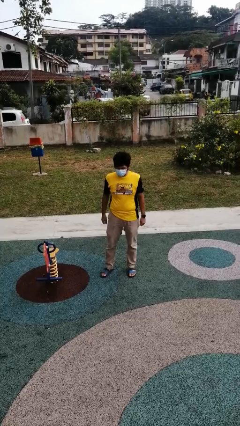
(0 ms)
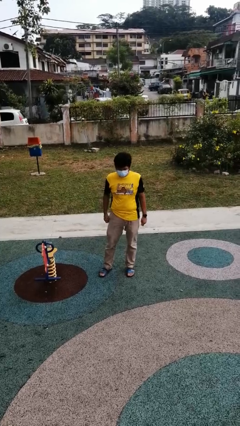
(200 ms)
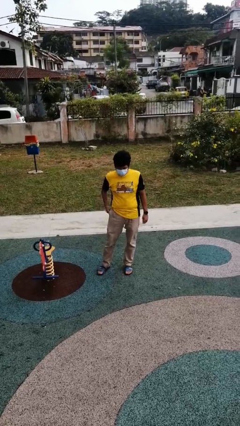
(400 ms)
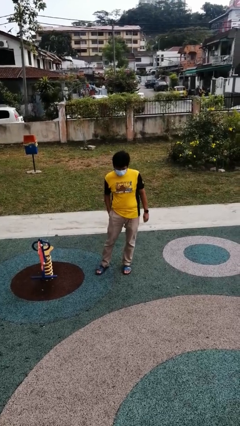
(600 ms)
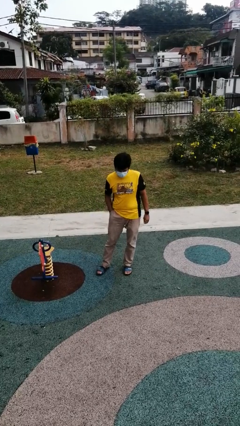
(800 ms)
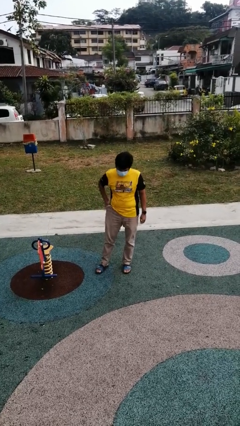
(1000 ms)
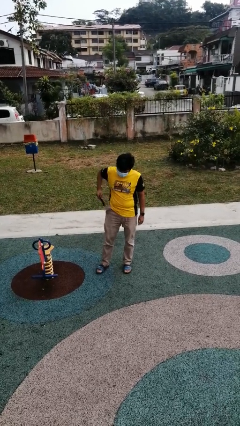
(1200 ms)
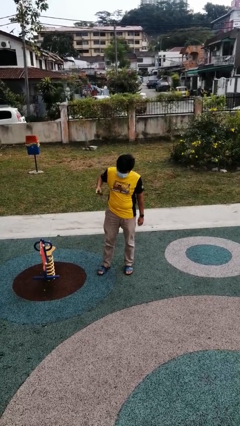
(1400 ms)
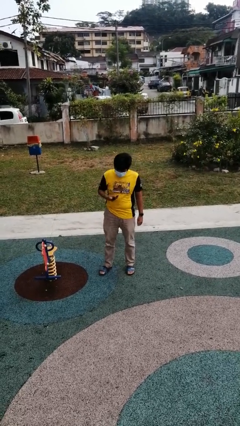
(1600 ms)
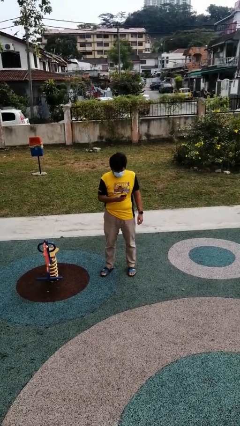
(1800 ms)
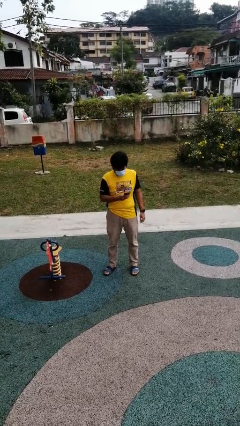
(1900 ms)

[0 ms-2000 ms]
person takes phone from pocket

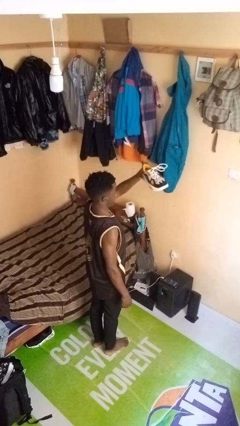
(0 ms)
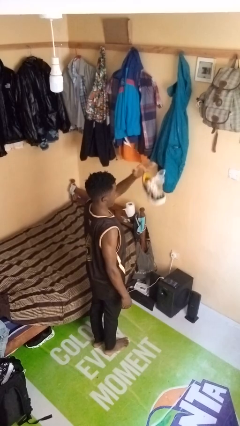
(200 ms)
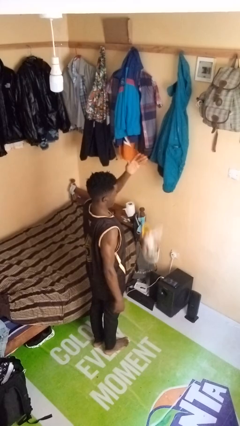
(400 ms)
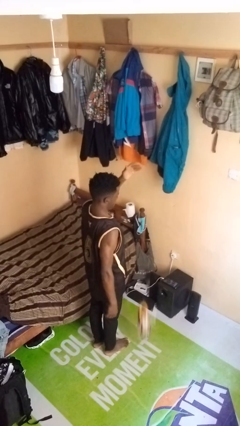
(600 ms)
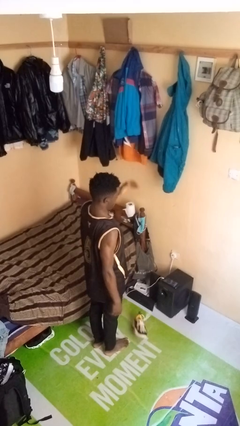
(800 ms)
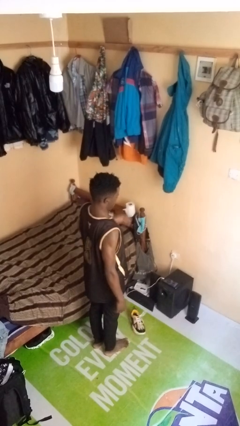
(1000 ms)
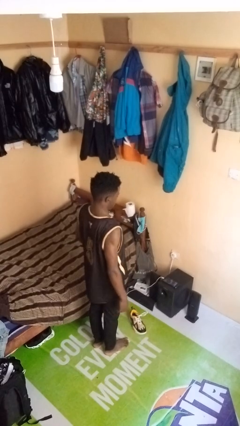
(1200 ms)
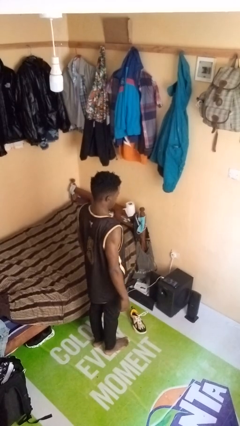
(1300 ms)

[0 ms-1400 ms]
person drops object

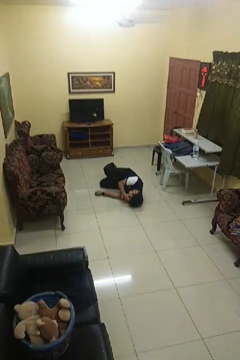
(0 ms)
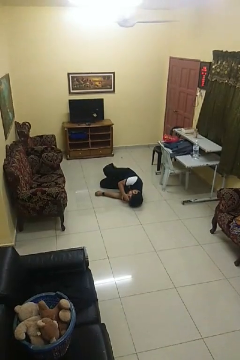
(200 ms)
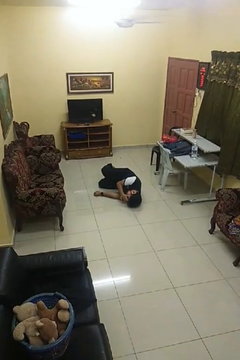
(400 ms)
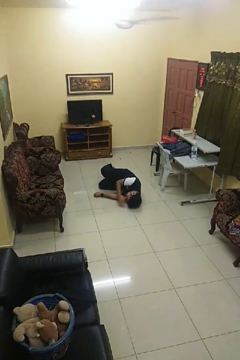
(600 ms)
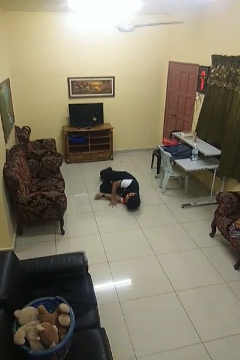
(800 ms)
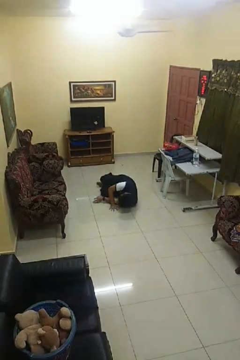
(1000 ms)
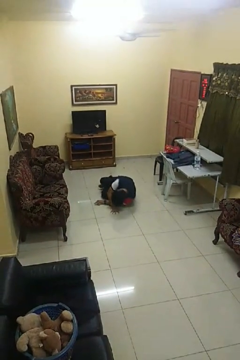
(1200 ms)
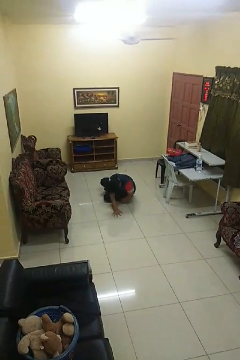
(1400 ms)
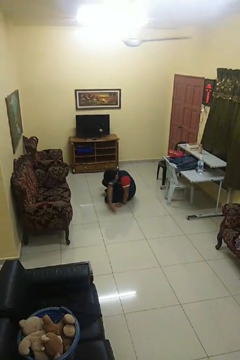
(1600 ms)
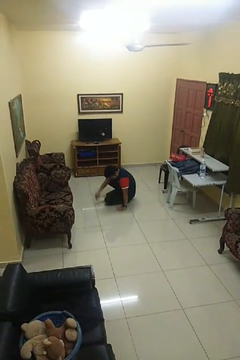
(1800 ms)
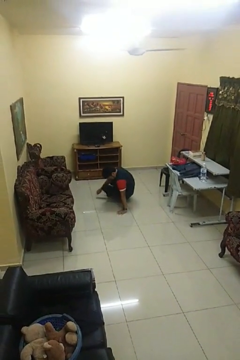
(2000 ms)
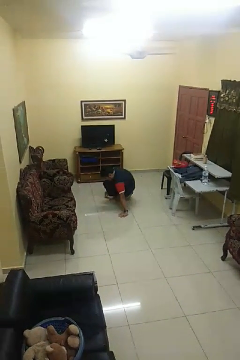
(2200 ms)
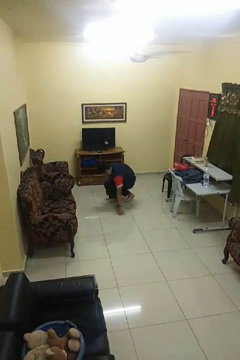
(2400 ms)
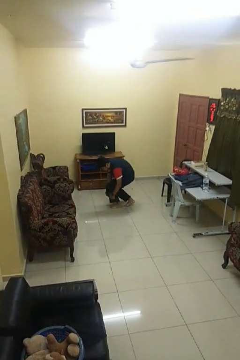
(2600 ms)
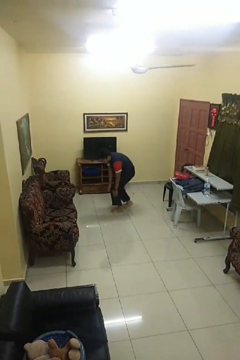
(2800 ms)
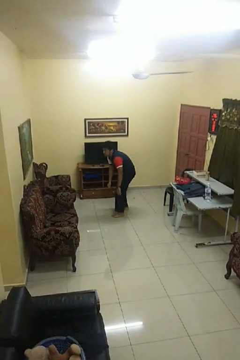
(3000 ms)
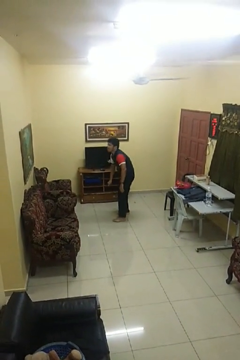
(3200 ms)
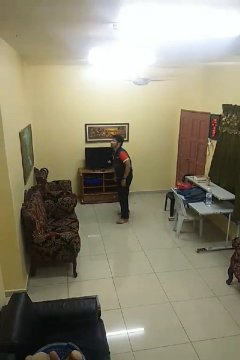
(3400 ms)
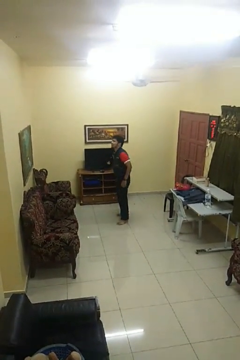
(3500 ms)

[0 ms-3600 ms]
person stands up from floor

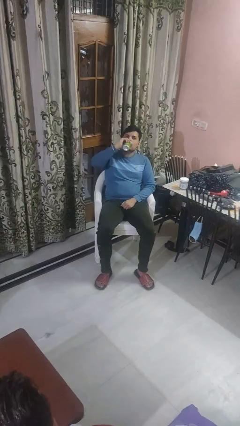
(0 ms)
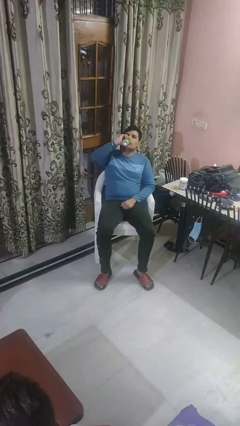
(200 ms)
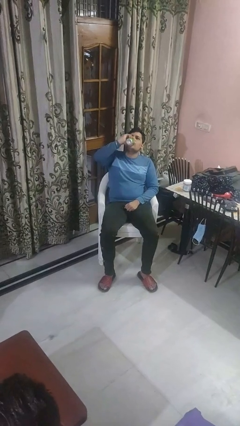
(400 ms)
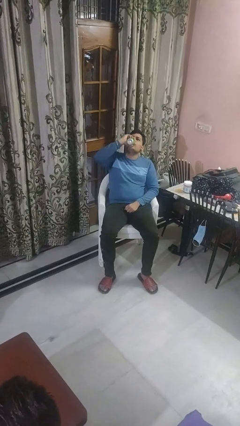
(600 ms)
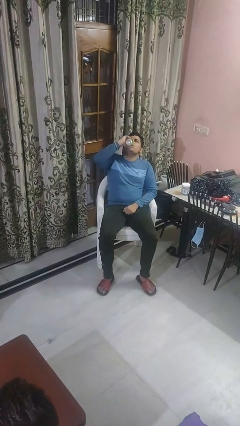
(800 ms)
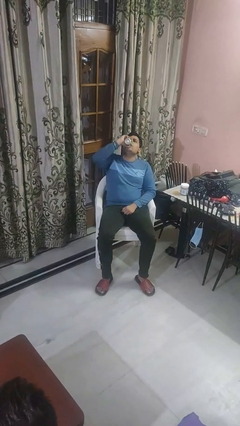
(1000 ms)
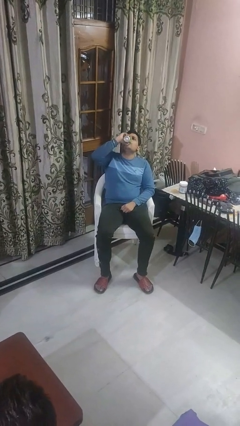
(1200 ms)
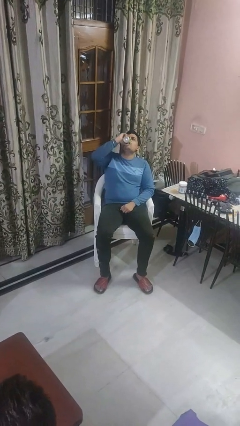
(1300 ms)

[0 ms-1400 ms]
person drinks from beverage can

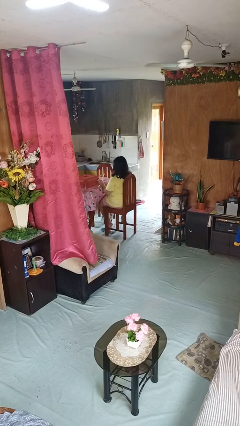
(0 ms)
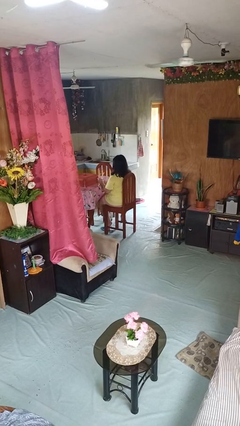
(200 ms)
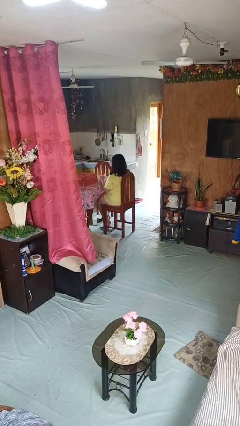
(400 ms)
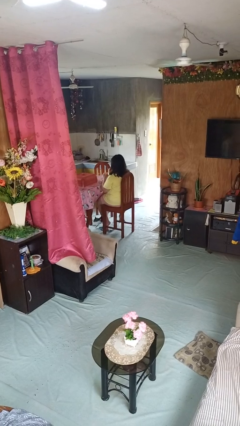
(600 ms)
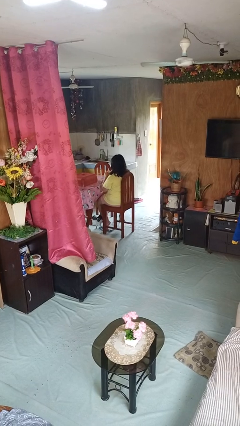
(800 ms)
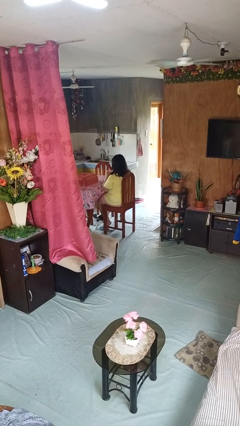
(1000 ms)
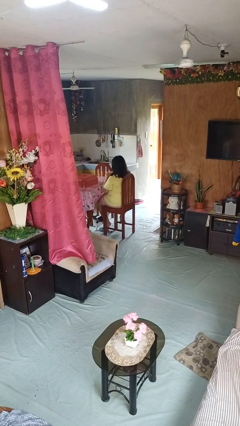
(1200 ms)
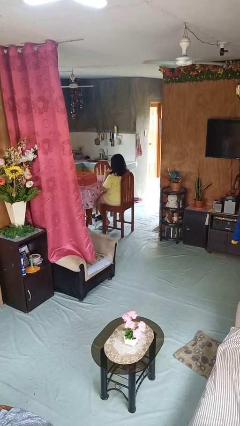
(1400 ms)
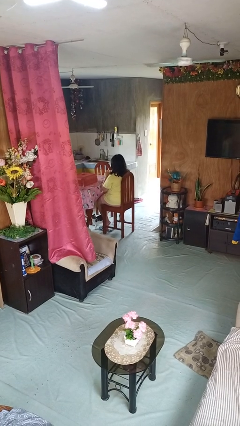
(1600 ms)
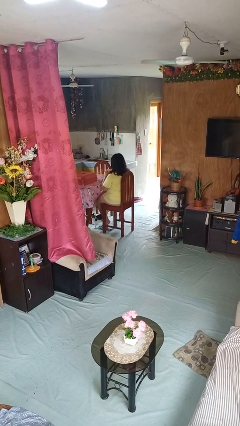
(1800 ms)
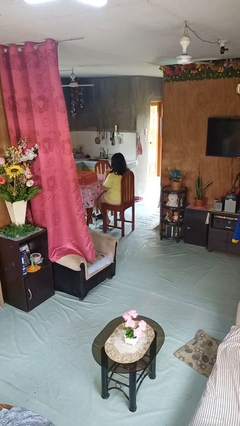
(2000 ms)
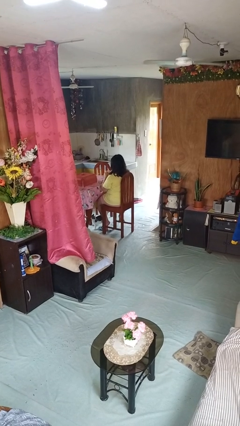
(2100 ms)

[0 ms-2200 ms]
person drinks from straw

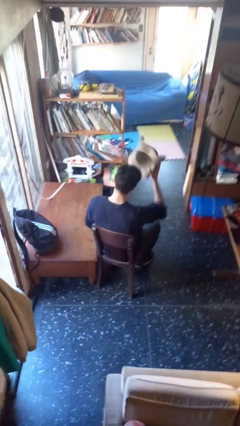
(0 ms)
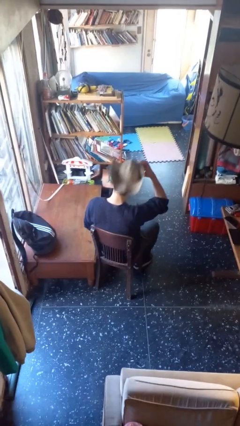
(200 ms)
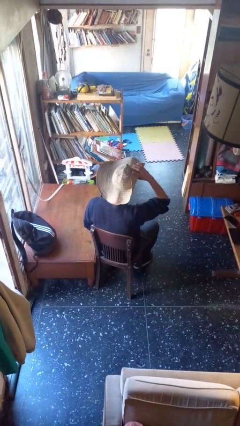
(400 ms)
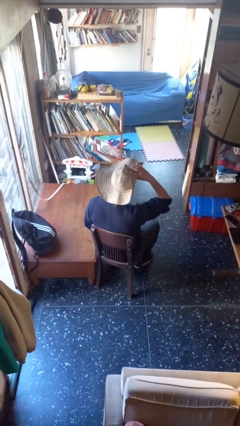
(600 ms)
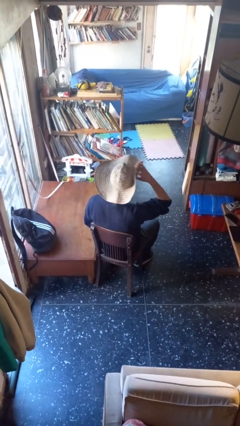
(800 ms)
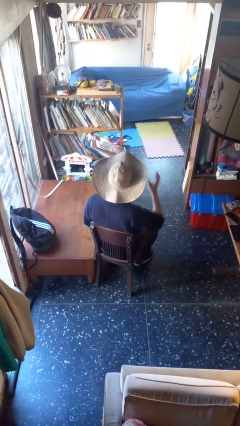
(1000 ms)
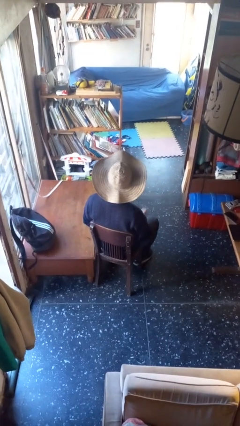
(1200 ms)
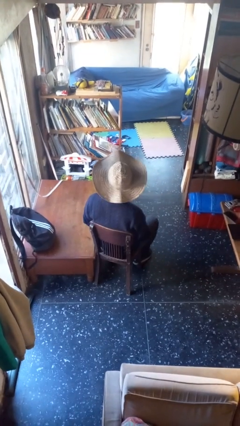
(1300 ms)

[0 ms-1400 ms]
person puts on hat

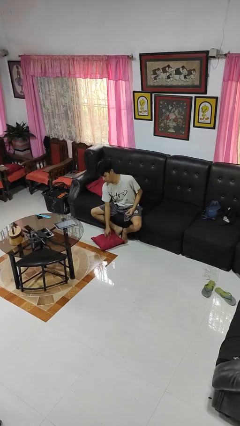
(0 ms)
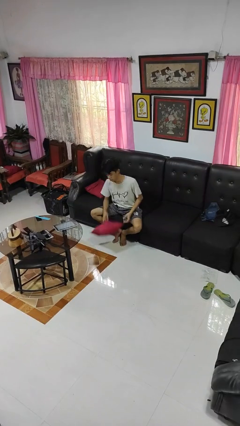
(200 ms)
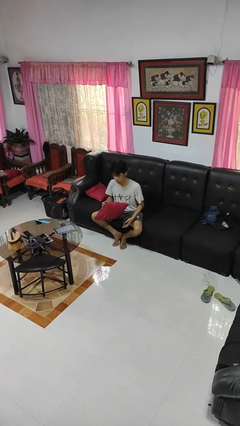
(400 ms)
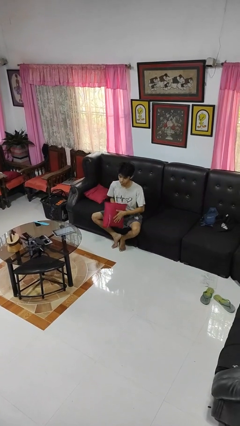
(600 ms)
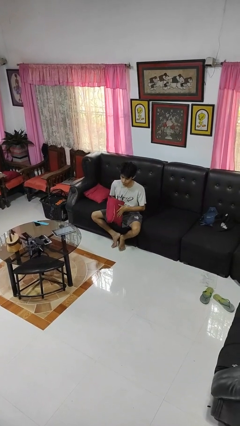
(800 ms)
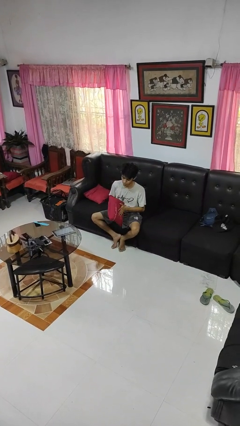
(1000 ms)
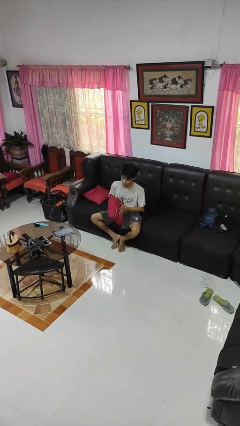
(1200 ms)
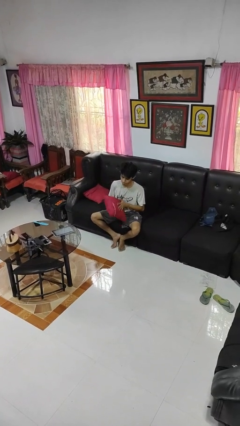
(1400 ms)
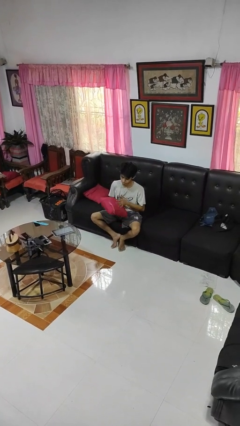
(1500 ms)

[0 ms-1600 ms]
person picks up object from floor

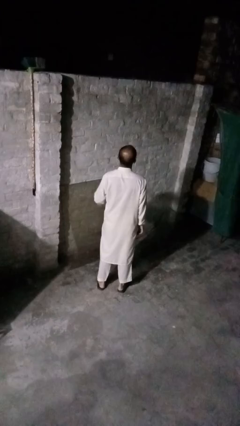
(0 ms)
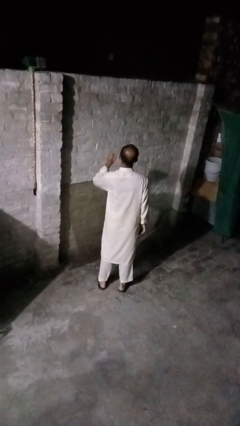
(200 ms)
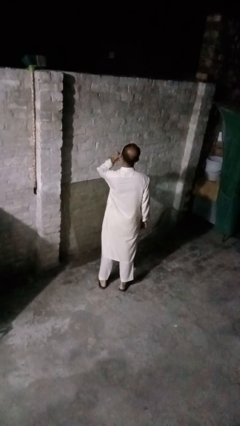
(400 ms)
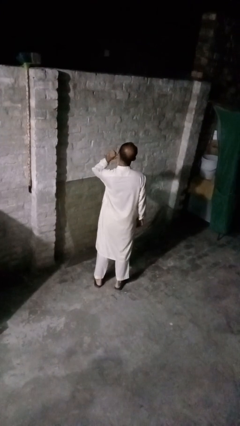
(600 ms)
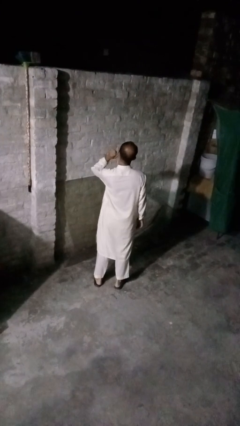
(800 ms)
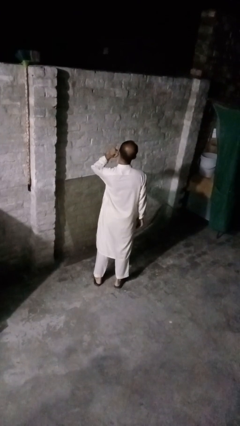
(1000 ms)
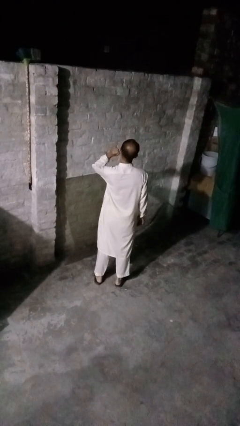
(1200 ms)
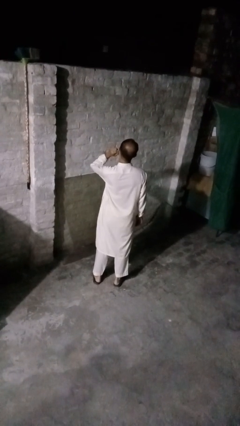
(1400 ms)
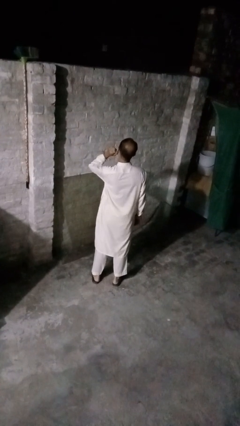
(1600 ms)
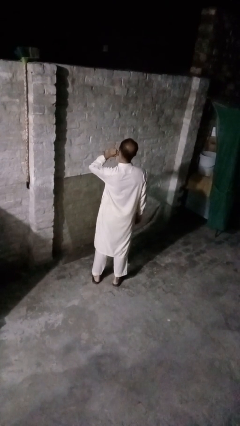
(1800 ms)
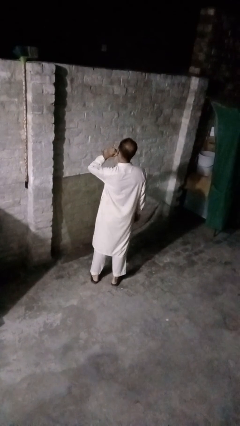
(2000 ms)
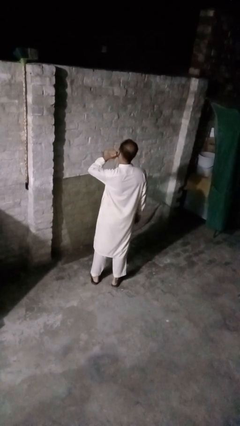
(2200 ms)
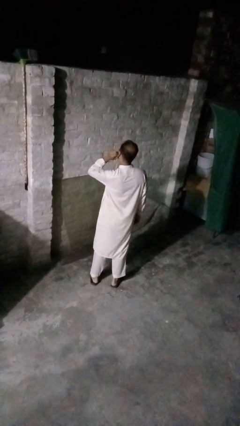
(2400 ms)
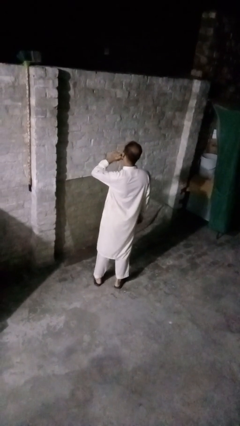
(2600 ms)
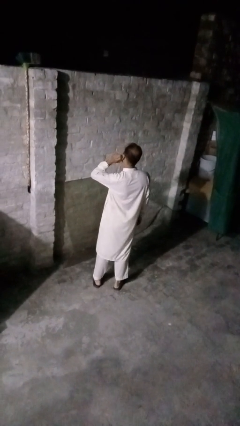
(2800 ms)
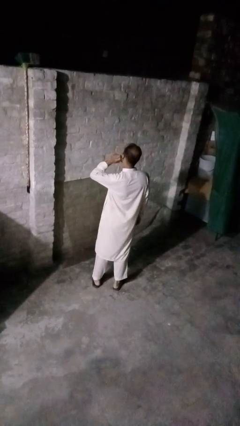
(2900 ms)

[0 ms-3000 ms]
person touches earlobe

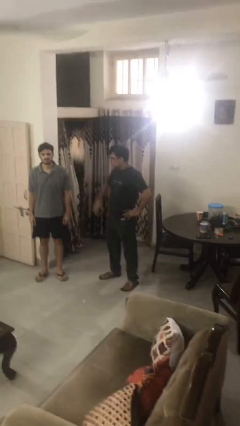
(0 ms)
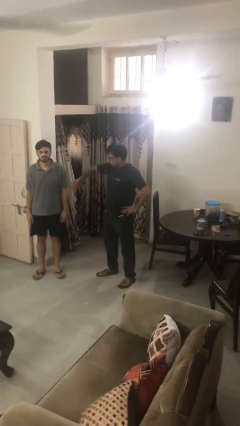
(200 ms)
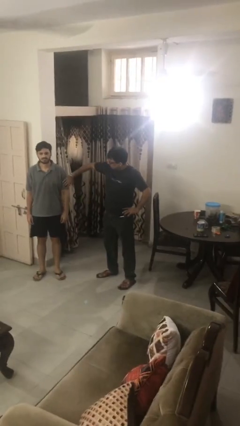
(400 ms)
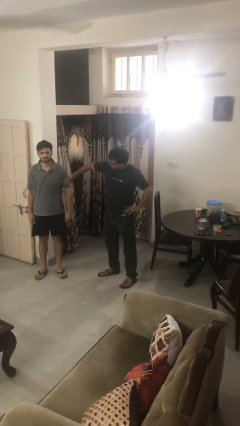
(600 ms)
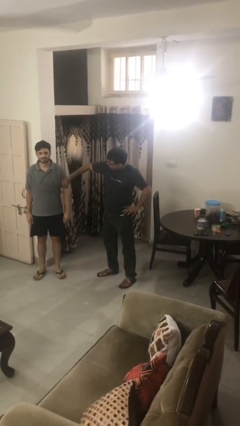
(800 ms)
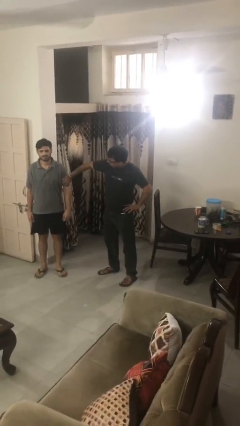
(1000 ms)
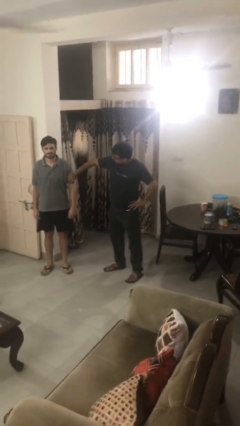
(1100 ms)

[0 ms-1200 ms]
person grabs person by bicep
